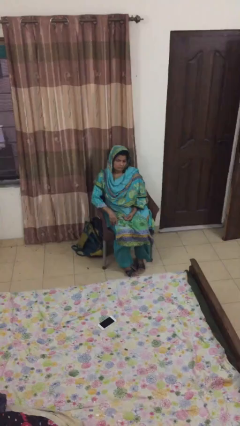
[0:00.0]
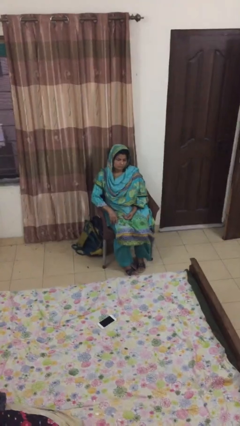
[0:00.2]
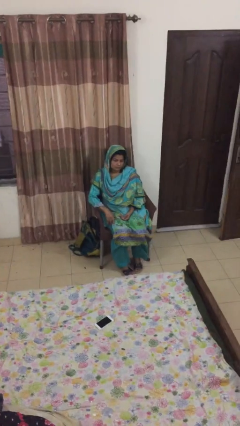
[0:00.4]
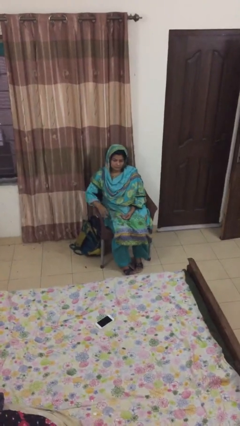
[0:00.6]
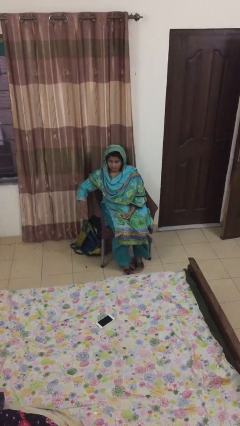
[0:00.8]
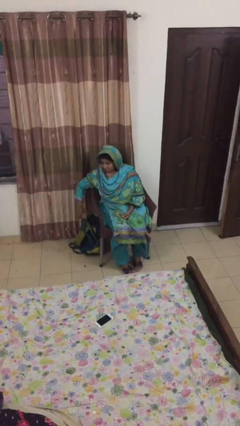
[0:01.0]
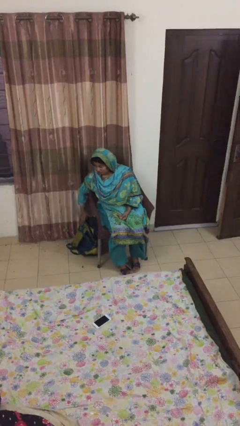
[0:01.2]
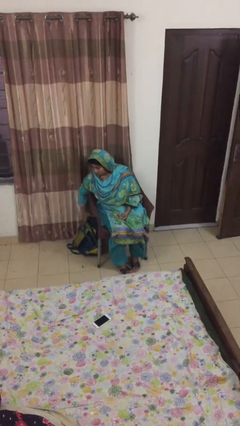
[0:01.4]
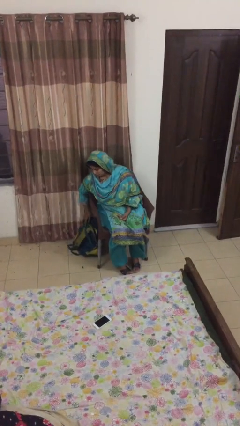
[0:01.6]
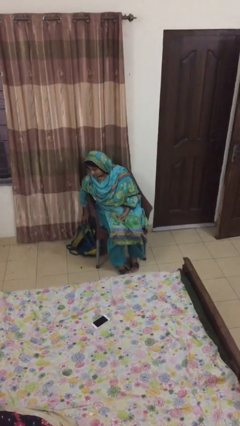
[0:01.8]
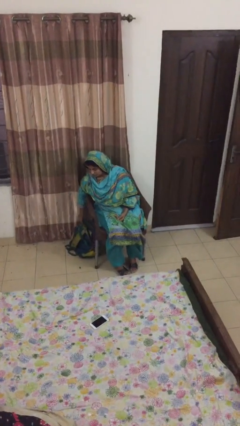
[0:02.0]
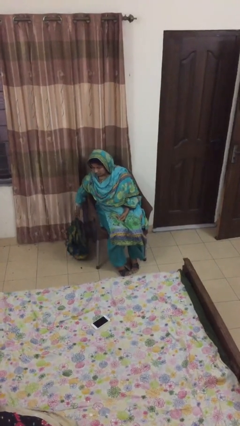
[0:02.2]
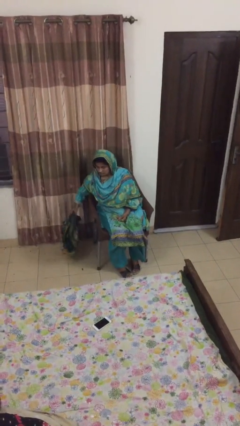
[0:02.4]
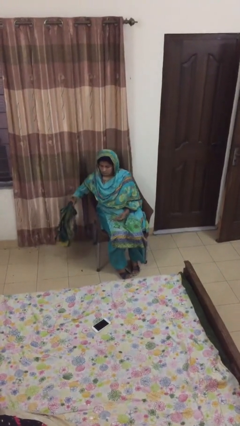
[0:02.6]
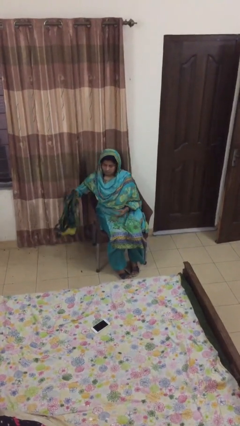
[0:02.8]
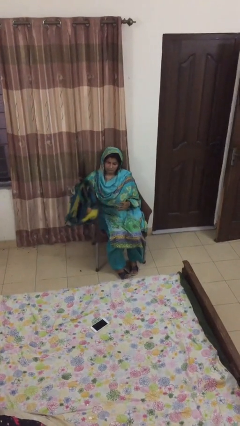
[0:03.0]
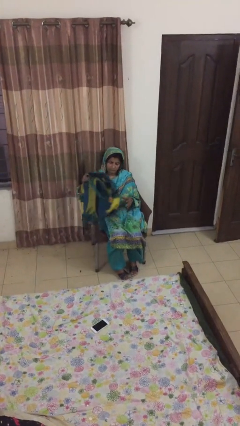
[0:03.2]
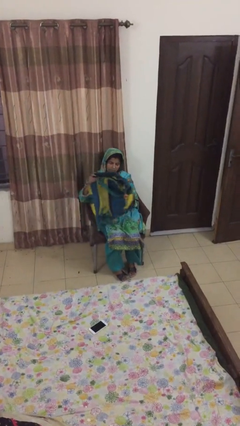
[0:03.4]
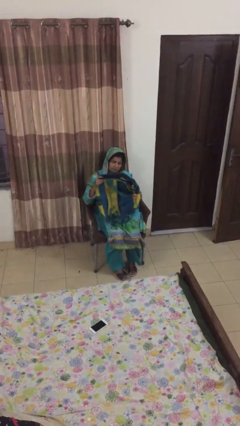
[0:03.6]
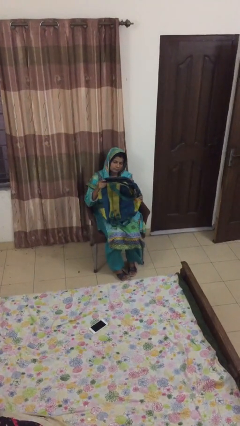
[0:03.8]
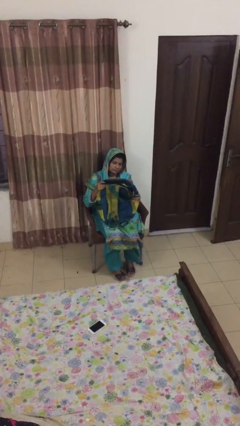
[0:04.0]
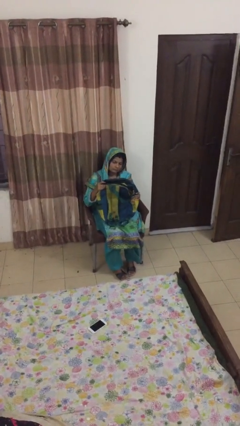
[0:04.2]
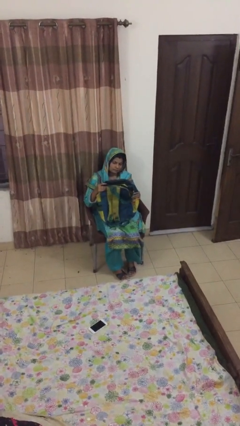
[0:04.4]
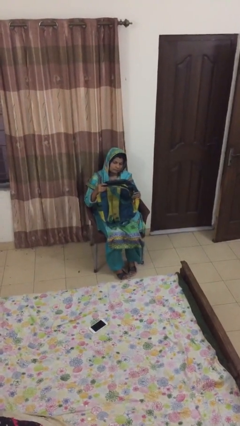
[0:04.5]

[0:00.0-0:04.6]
person picks up object from floor

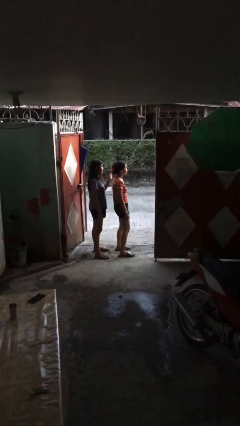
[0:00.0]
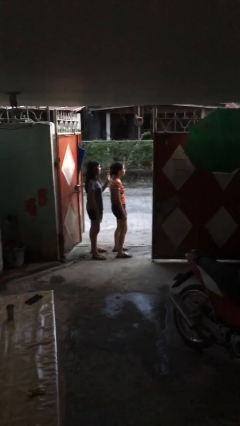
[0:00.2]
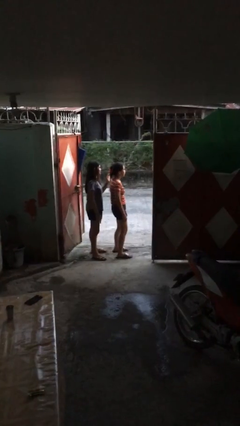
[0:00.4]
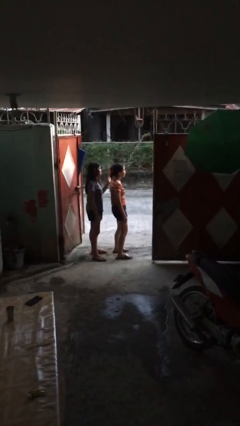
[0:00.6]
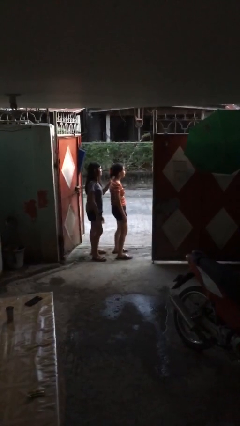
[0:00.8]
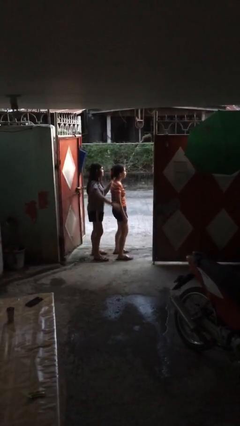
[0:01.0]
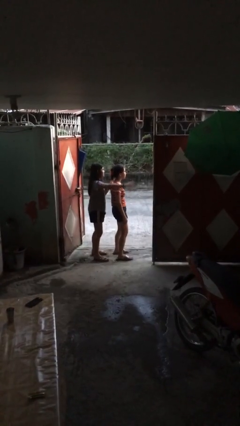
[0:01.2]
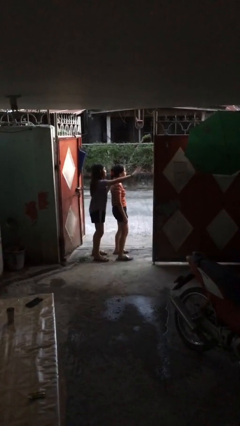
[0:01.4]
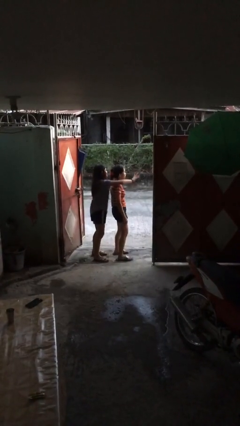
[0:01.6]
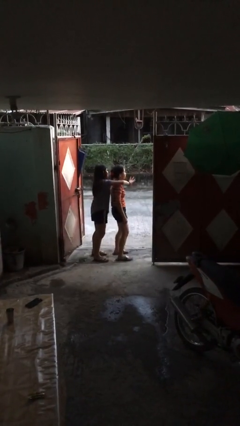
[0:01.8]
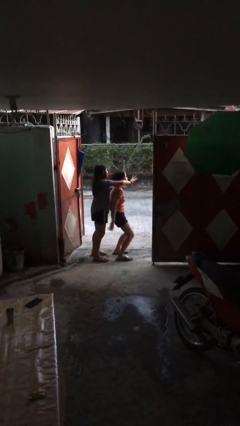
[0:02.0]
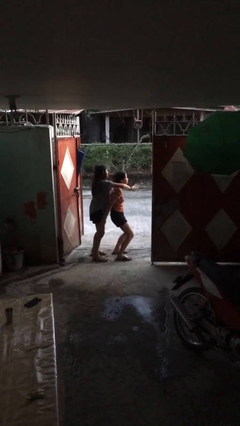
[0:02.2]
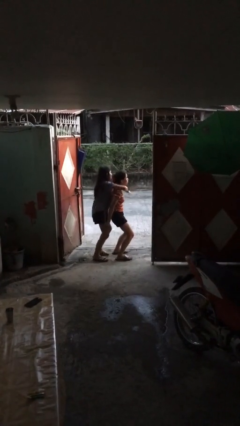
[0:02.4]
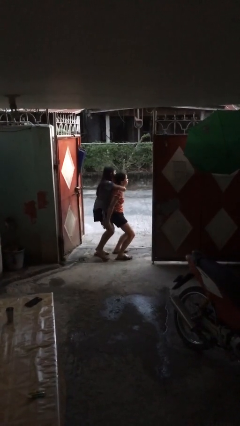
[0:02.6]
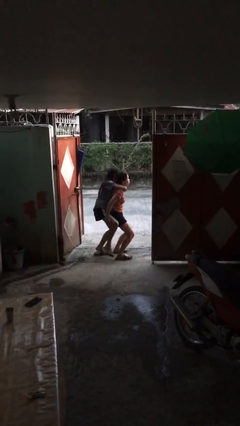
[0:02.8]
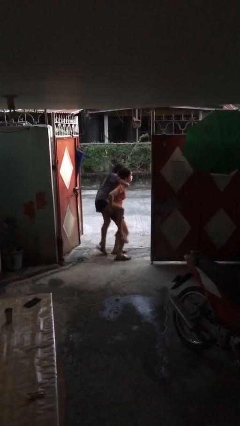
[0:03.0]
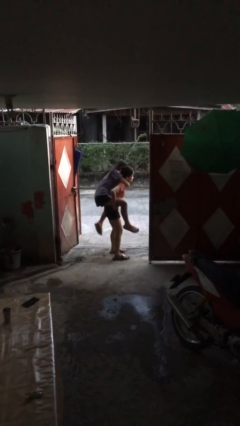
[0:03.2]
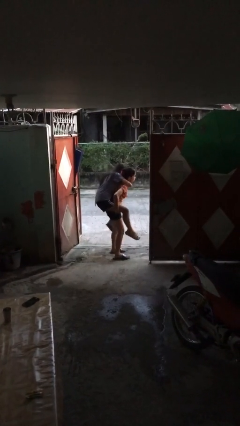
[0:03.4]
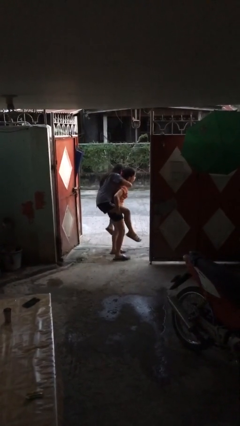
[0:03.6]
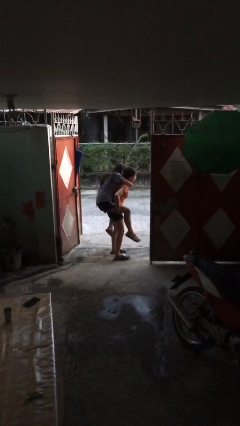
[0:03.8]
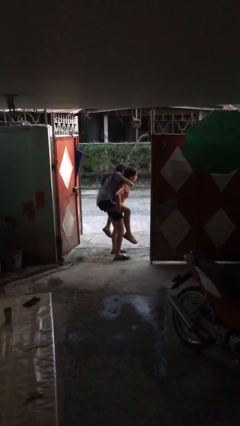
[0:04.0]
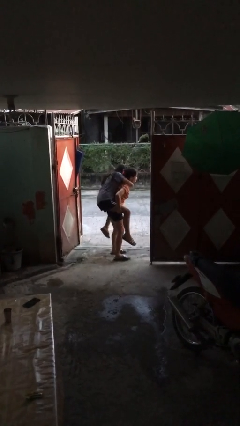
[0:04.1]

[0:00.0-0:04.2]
person carries person over shoulder

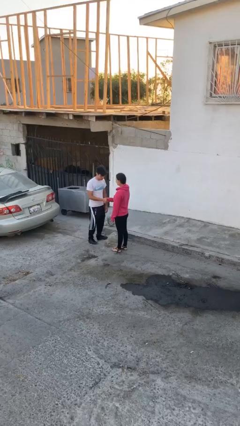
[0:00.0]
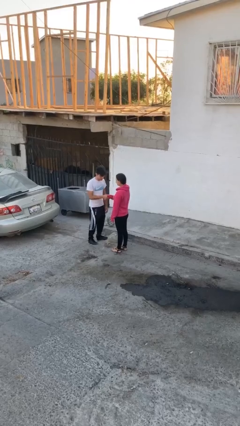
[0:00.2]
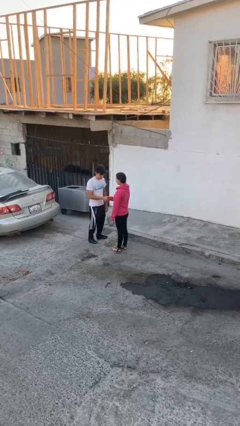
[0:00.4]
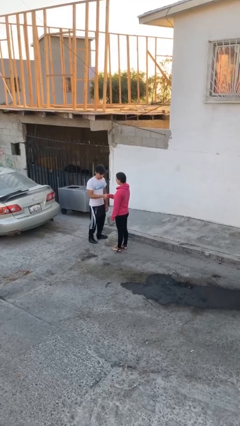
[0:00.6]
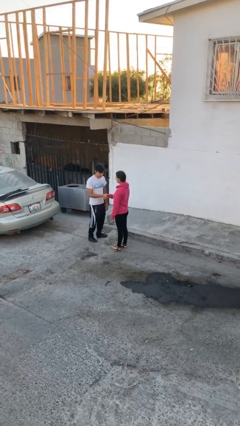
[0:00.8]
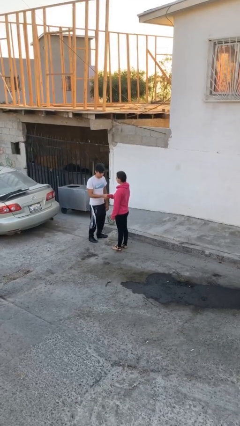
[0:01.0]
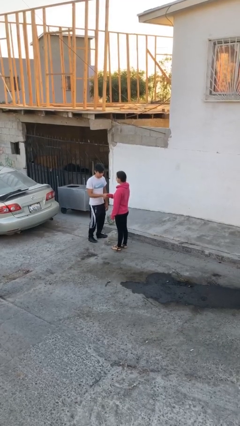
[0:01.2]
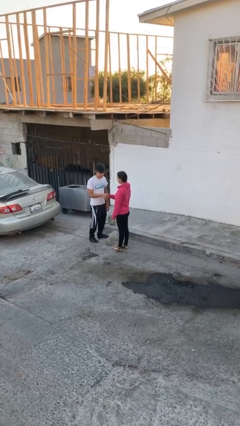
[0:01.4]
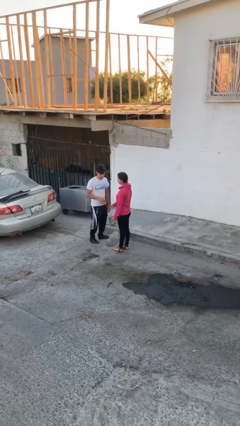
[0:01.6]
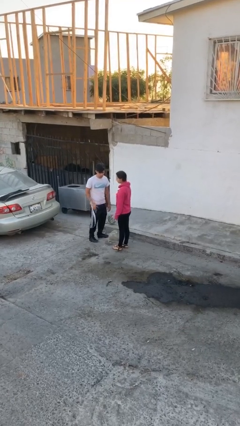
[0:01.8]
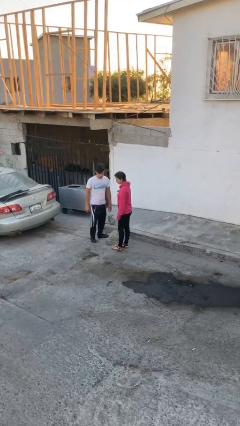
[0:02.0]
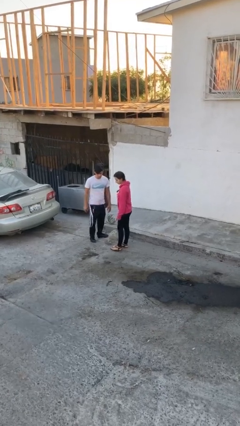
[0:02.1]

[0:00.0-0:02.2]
person shakes hand

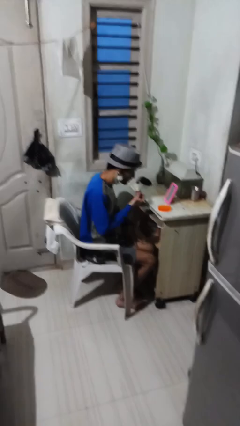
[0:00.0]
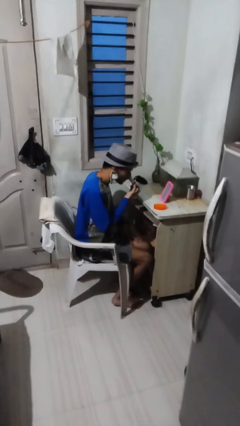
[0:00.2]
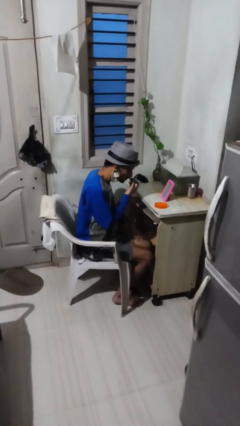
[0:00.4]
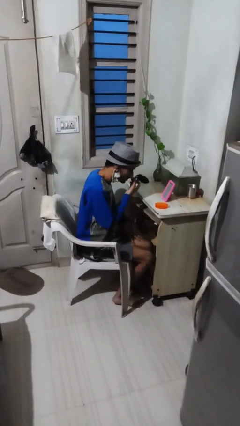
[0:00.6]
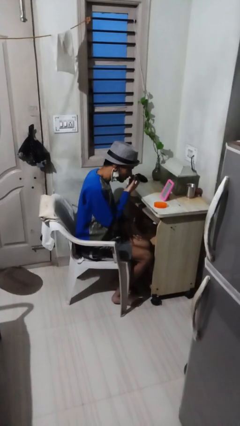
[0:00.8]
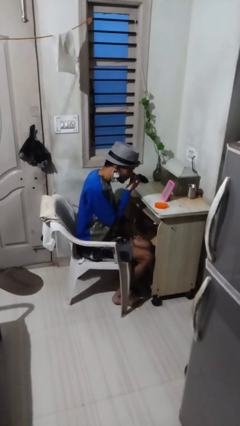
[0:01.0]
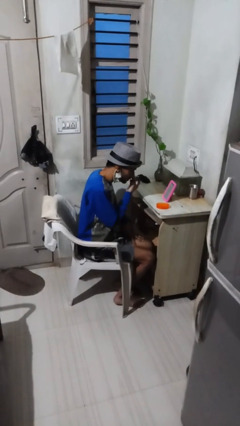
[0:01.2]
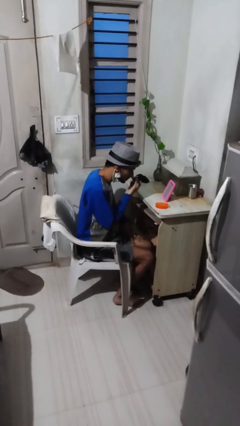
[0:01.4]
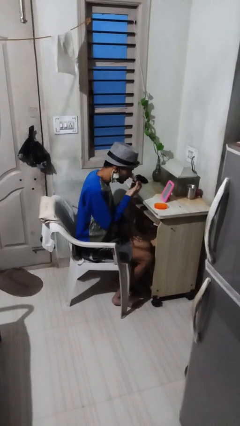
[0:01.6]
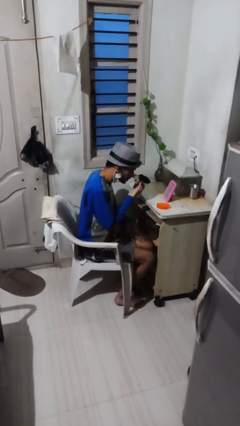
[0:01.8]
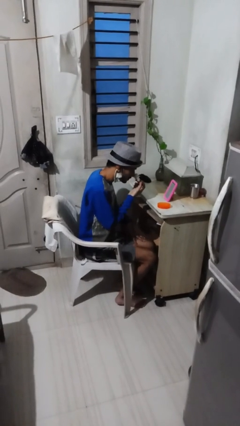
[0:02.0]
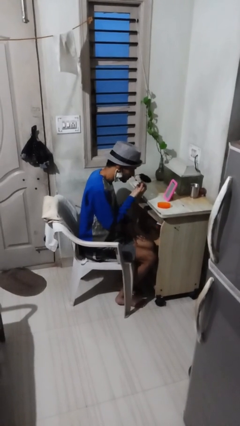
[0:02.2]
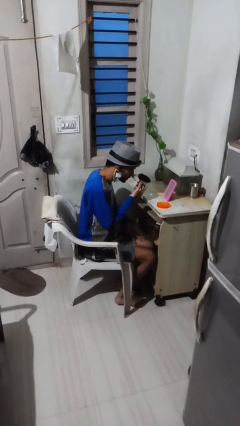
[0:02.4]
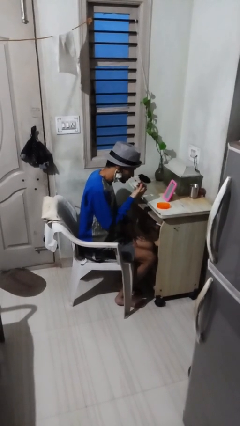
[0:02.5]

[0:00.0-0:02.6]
person applies foundation makeup

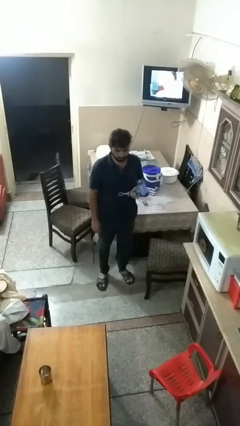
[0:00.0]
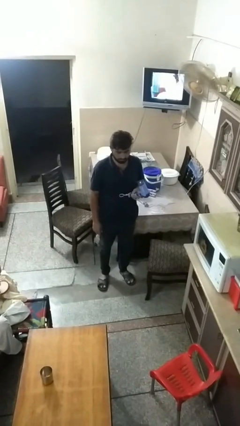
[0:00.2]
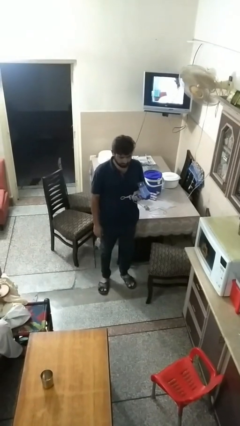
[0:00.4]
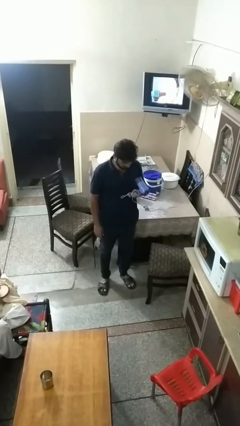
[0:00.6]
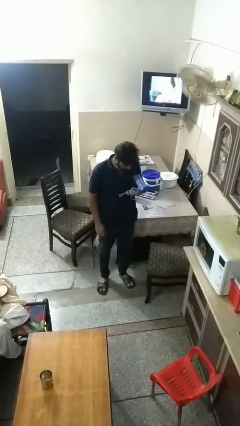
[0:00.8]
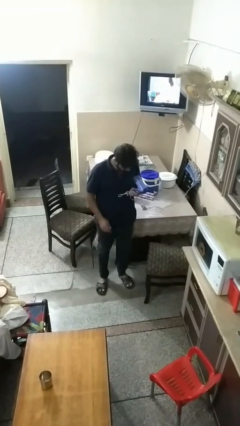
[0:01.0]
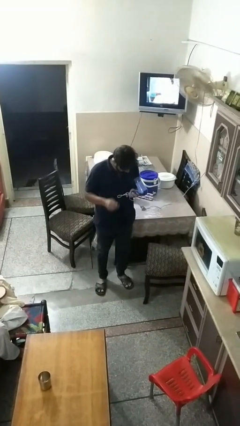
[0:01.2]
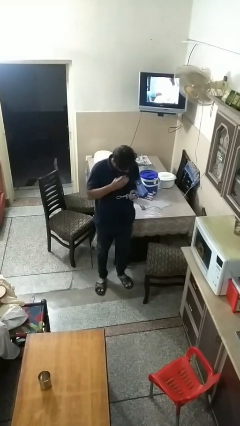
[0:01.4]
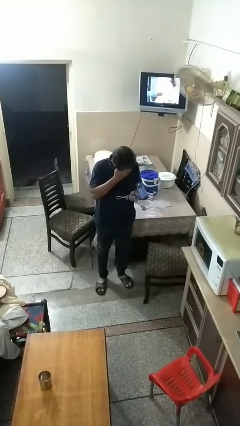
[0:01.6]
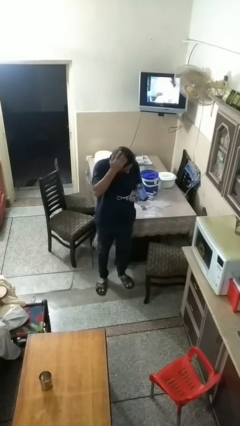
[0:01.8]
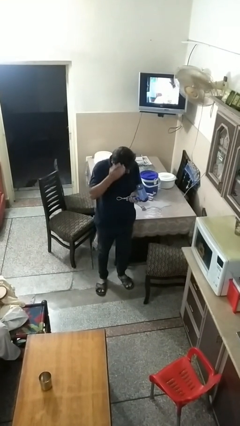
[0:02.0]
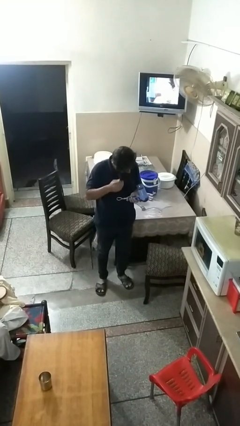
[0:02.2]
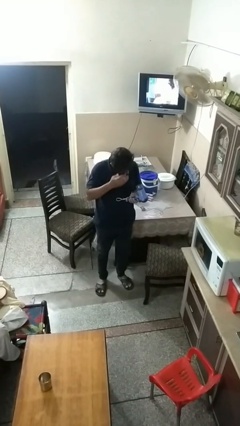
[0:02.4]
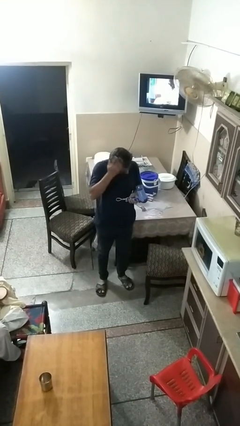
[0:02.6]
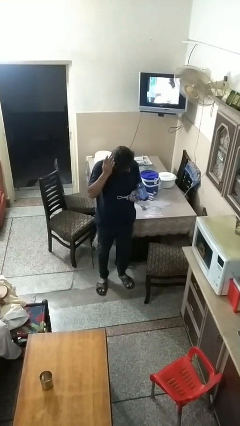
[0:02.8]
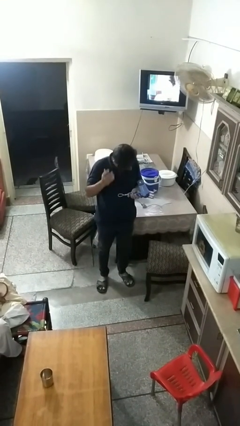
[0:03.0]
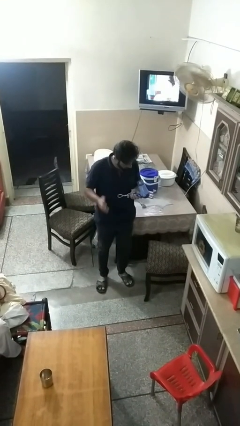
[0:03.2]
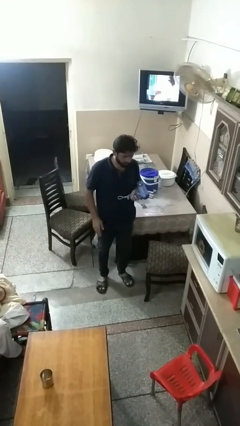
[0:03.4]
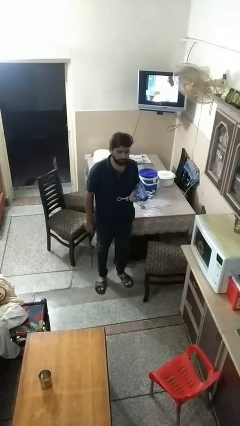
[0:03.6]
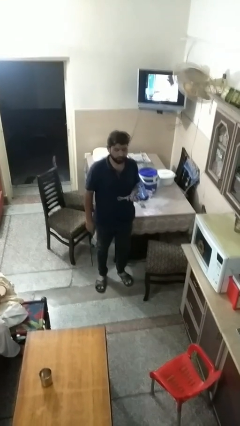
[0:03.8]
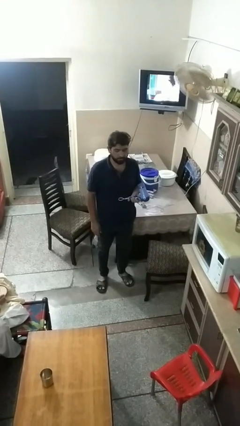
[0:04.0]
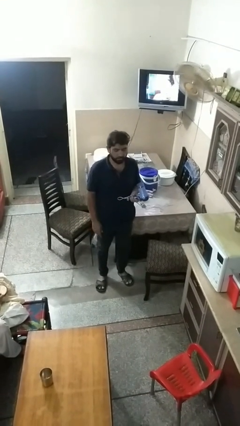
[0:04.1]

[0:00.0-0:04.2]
person dries hair with hairdryer

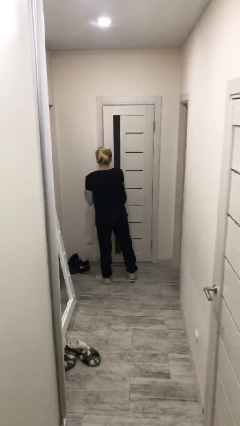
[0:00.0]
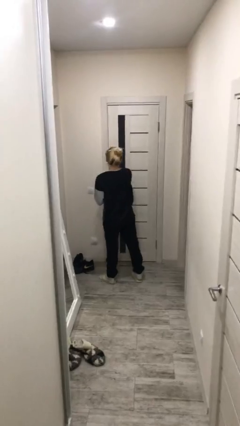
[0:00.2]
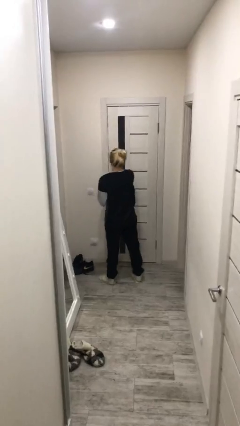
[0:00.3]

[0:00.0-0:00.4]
person closes facility door
